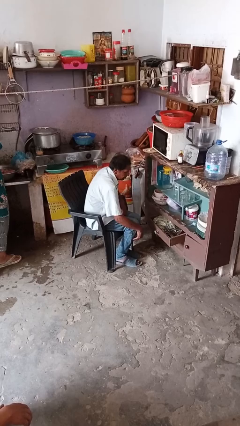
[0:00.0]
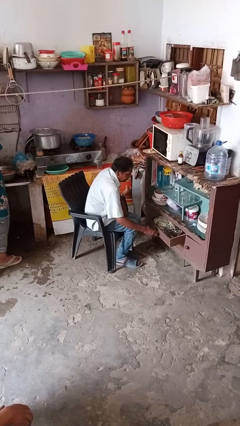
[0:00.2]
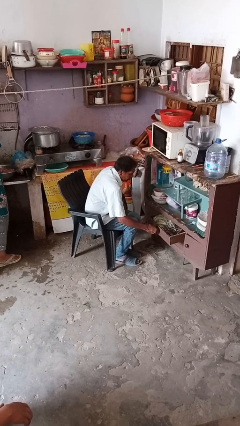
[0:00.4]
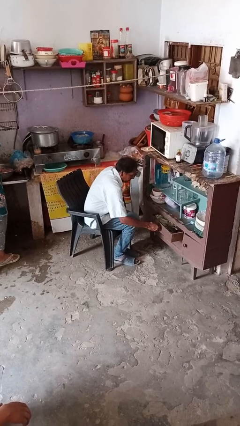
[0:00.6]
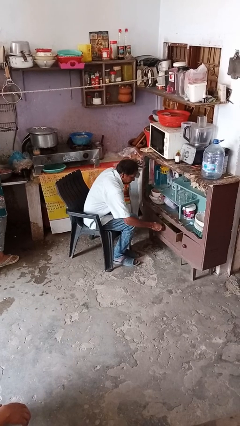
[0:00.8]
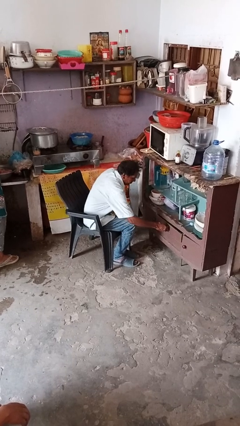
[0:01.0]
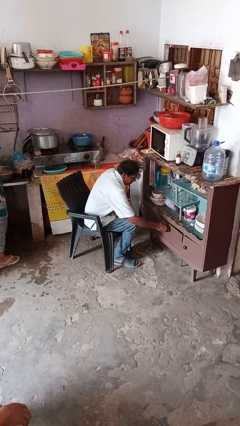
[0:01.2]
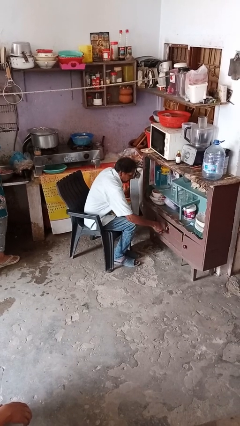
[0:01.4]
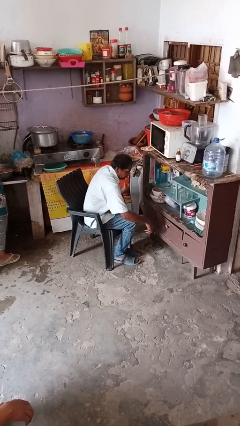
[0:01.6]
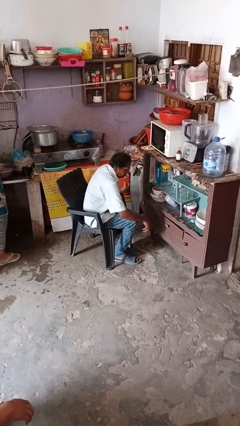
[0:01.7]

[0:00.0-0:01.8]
person closes dresser drawer

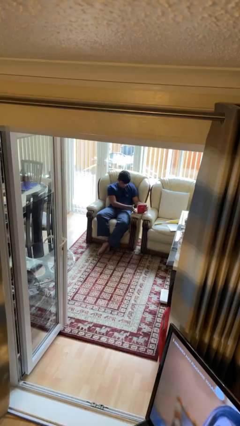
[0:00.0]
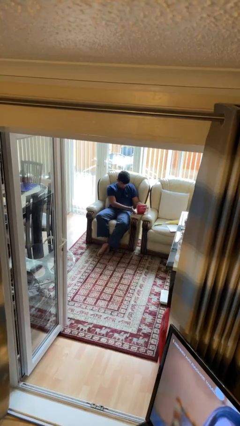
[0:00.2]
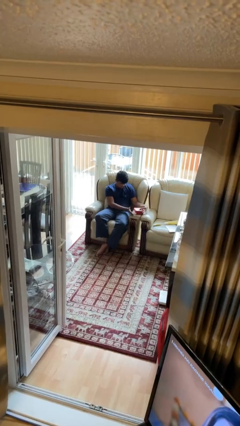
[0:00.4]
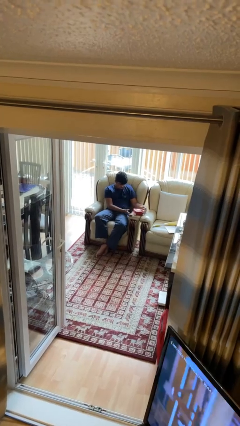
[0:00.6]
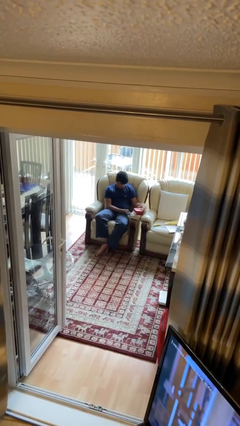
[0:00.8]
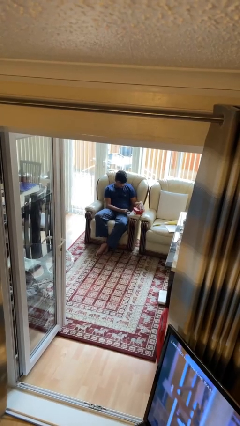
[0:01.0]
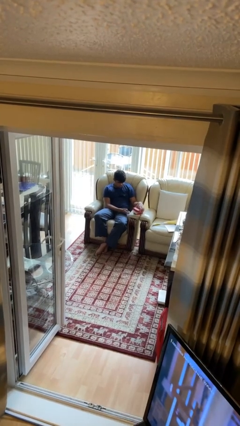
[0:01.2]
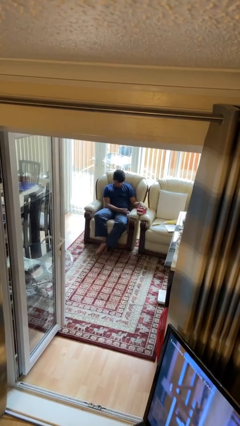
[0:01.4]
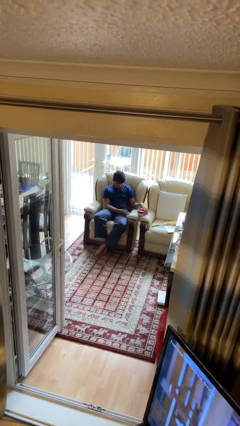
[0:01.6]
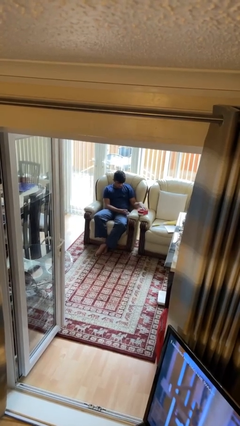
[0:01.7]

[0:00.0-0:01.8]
person closes jewelry box

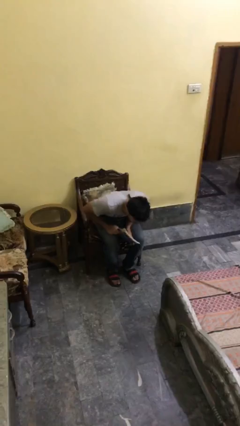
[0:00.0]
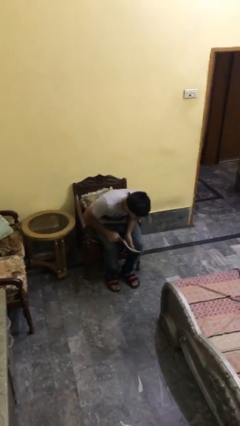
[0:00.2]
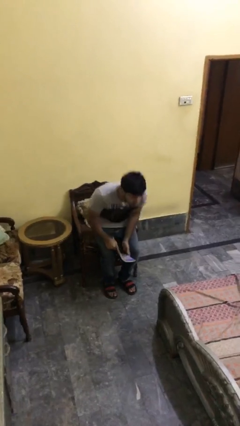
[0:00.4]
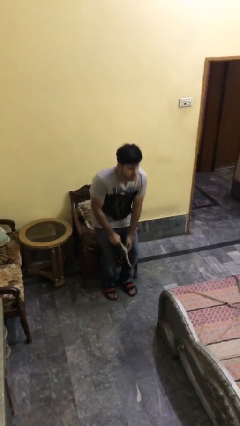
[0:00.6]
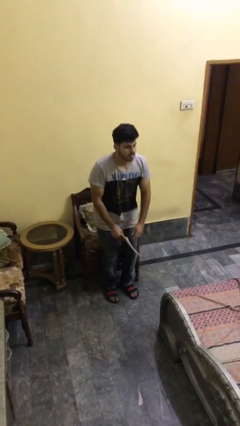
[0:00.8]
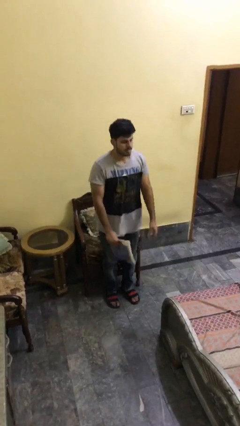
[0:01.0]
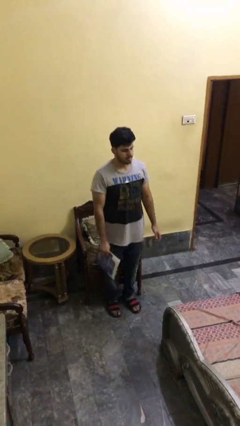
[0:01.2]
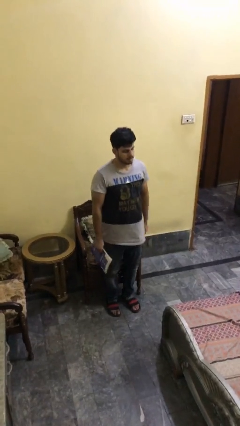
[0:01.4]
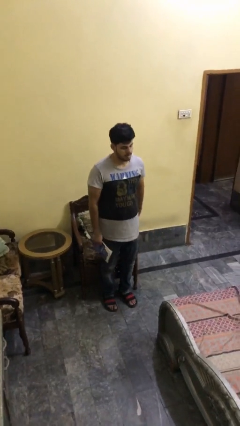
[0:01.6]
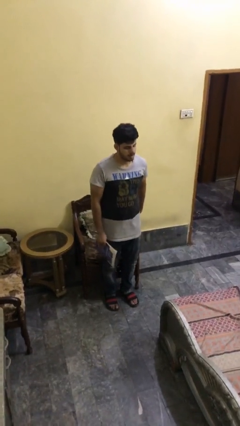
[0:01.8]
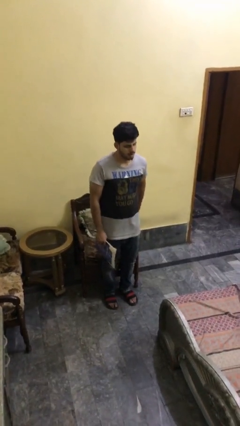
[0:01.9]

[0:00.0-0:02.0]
person stands up

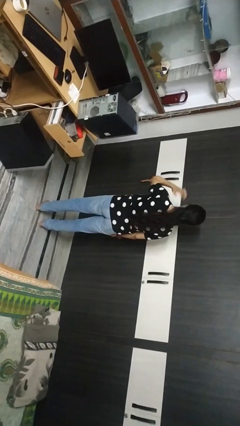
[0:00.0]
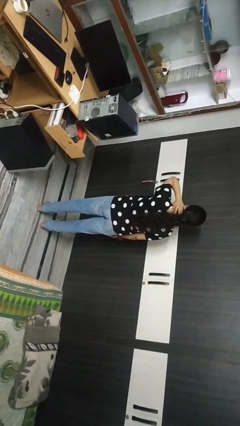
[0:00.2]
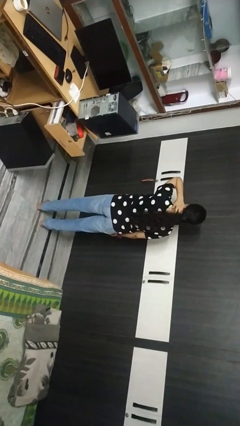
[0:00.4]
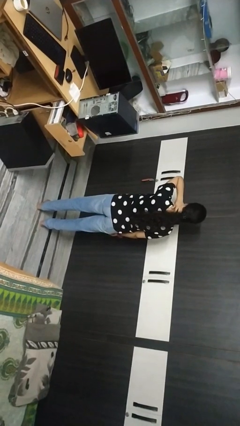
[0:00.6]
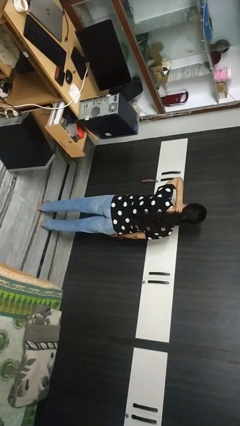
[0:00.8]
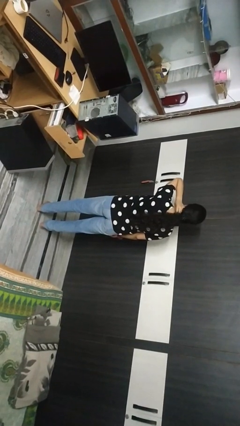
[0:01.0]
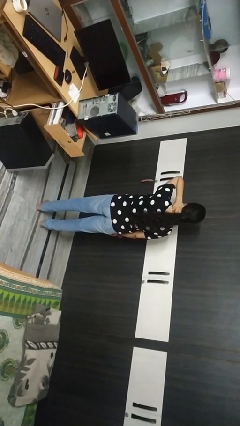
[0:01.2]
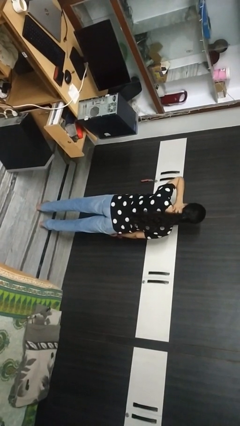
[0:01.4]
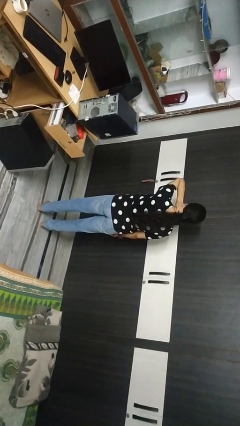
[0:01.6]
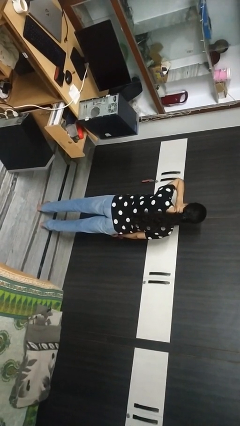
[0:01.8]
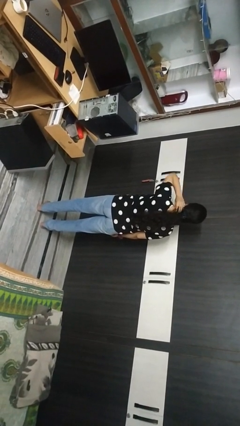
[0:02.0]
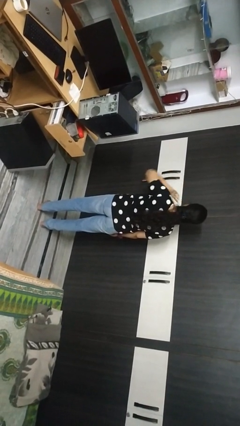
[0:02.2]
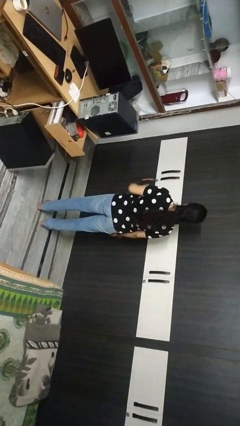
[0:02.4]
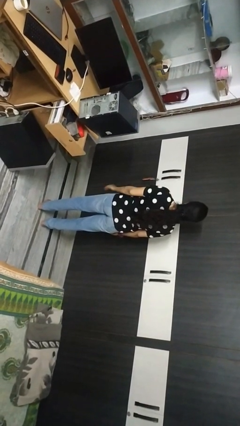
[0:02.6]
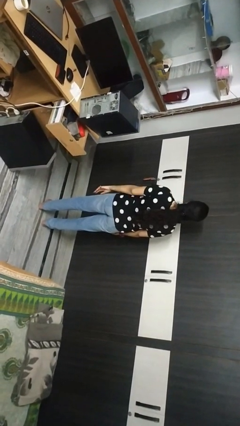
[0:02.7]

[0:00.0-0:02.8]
person rubs neck

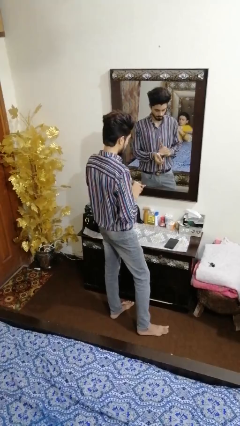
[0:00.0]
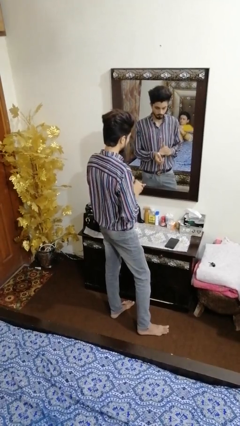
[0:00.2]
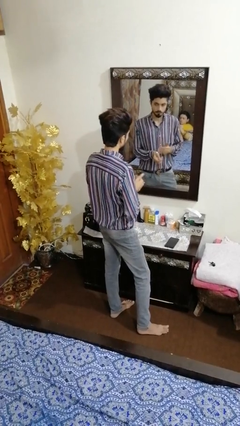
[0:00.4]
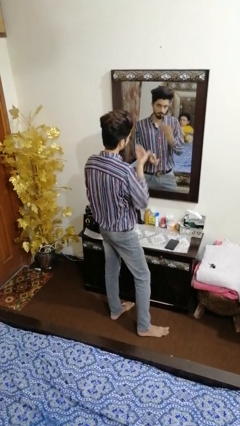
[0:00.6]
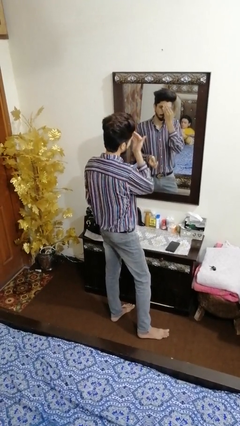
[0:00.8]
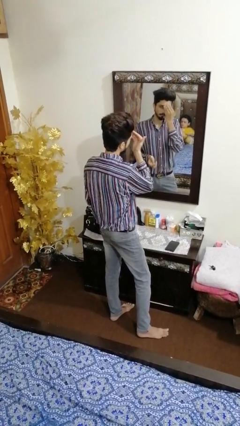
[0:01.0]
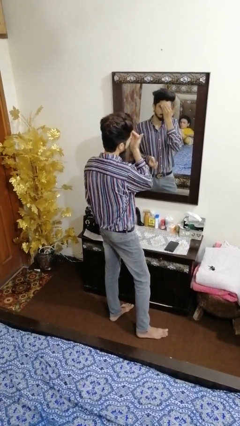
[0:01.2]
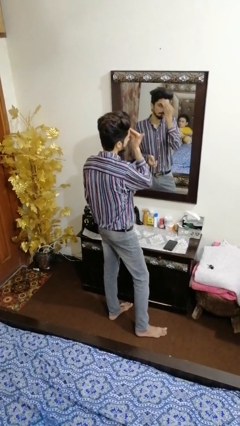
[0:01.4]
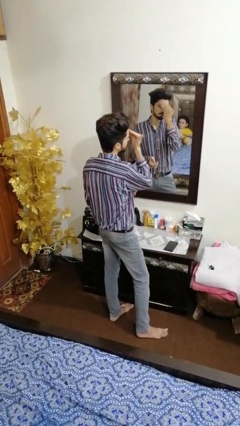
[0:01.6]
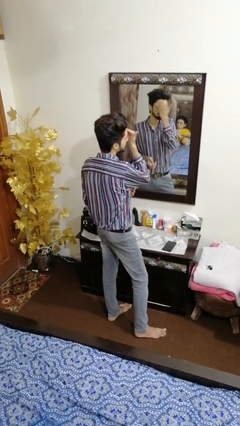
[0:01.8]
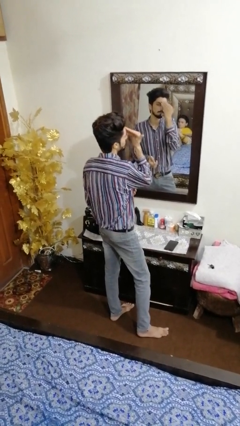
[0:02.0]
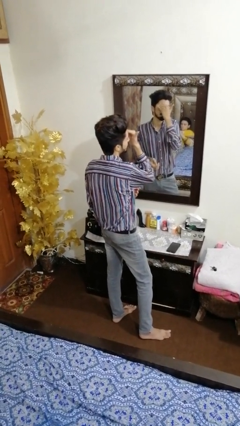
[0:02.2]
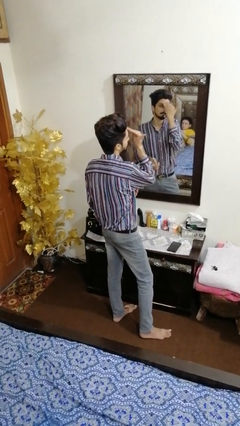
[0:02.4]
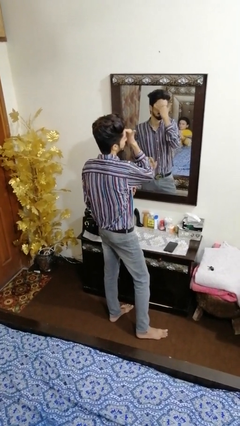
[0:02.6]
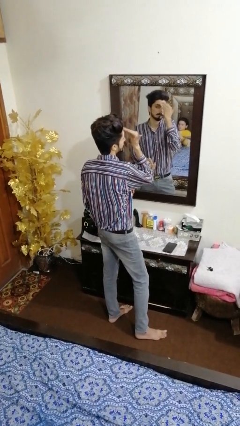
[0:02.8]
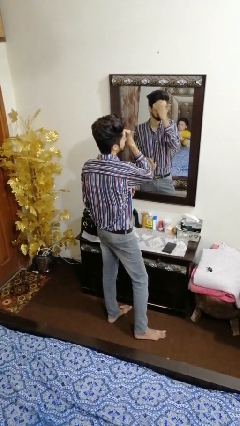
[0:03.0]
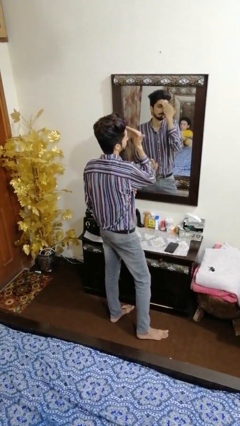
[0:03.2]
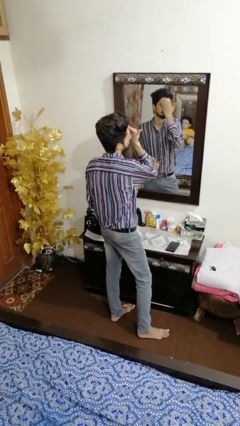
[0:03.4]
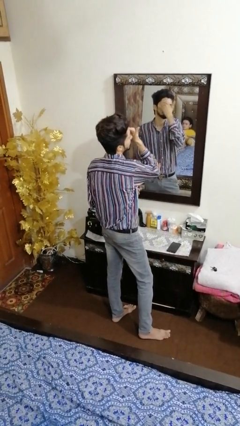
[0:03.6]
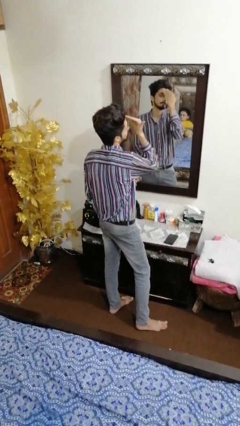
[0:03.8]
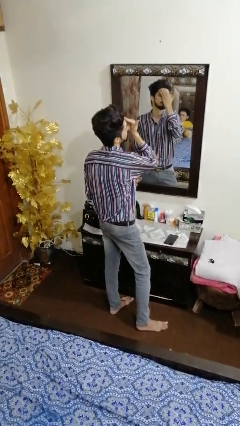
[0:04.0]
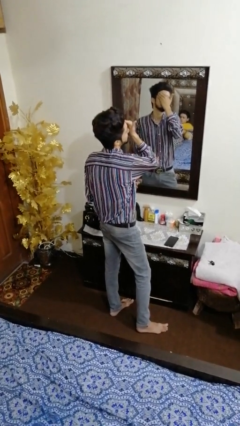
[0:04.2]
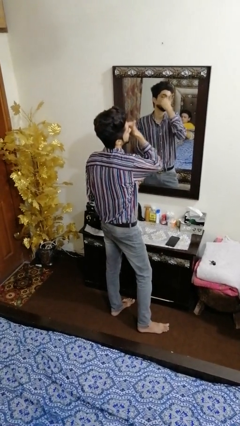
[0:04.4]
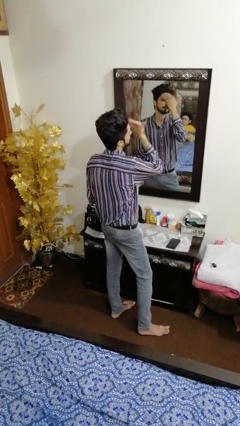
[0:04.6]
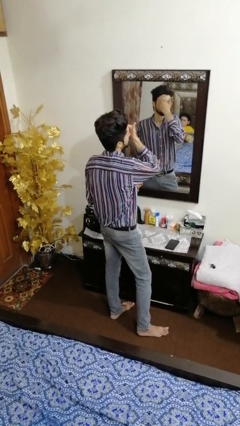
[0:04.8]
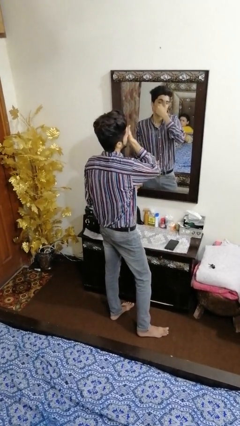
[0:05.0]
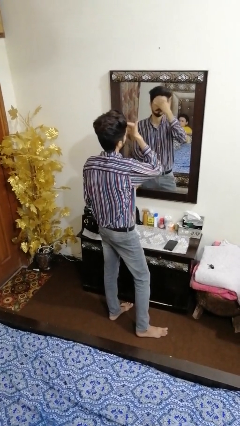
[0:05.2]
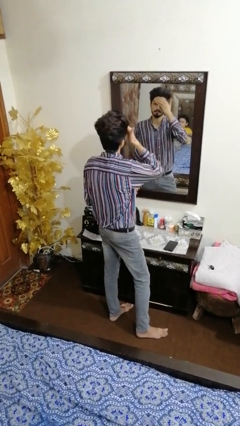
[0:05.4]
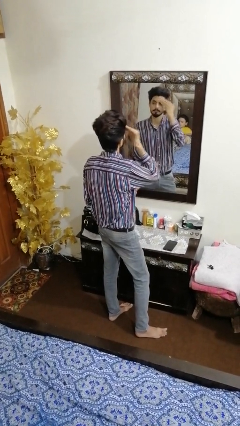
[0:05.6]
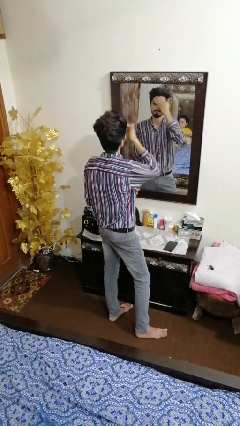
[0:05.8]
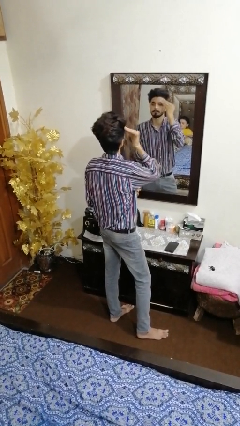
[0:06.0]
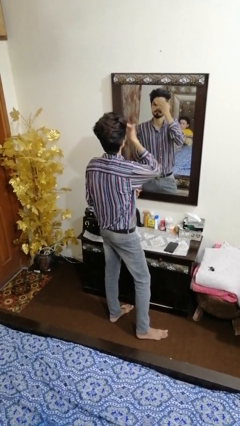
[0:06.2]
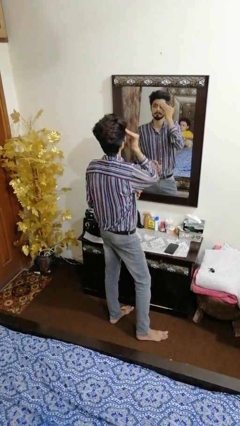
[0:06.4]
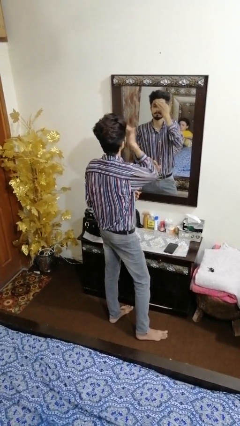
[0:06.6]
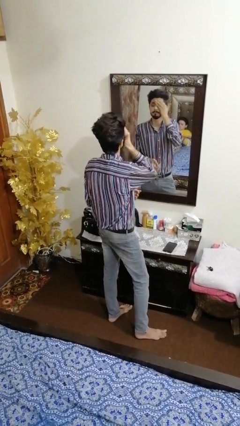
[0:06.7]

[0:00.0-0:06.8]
person applies foundation makeup

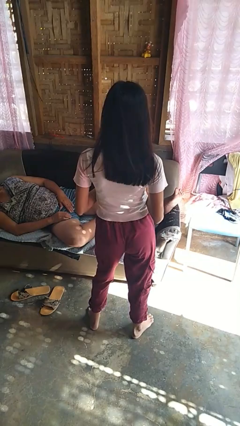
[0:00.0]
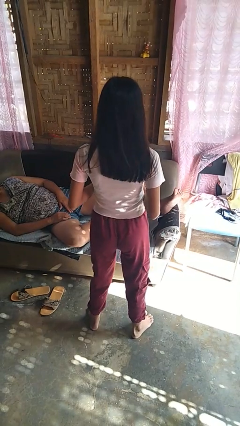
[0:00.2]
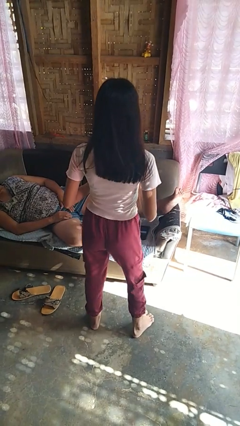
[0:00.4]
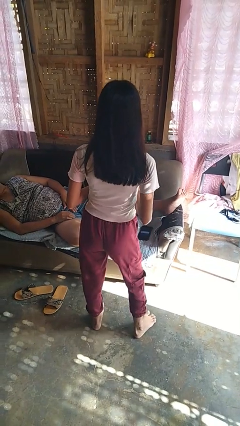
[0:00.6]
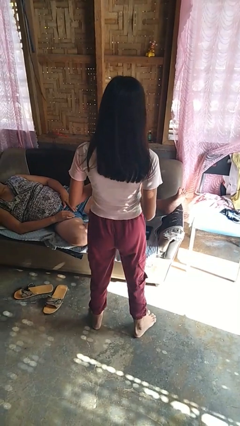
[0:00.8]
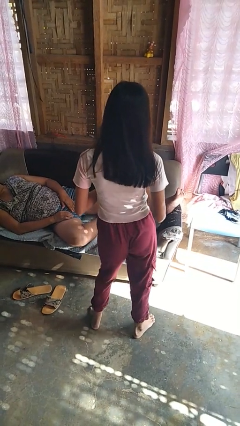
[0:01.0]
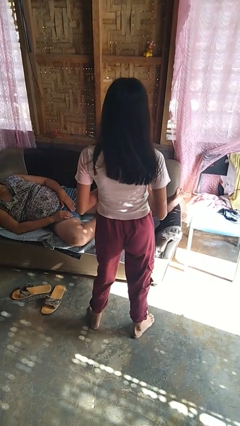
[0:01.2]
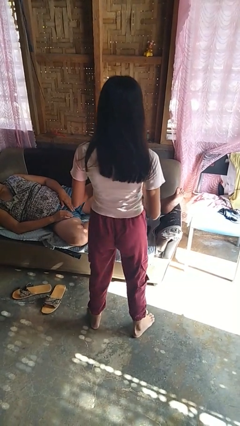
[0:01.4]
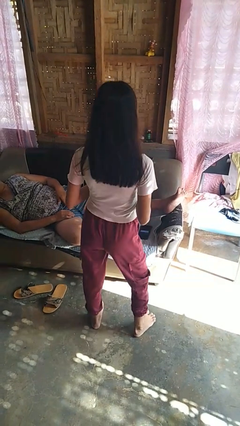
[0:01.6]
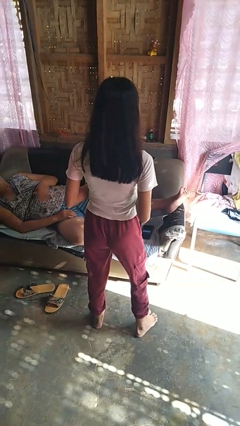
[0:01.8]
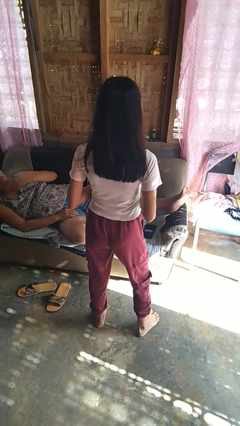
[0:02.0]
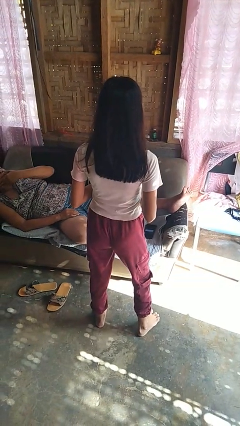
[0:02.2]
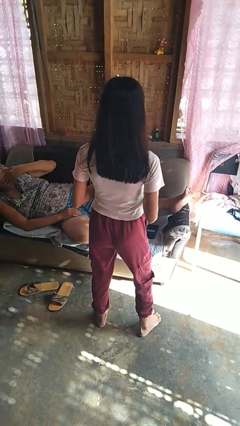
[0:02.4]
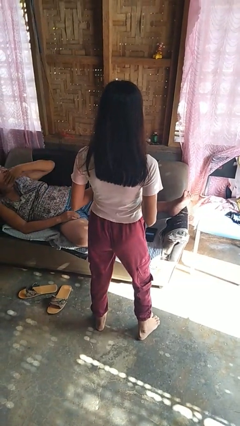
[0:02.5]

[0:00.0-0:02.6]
person wiggles hips
